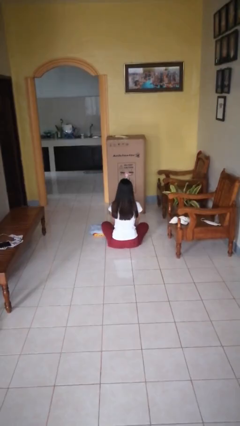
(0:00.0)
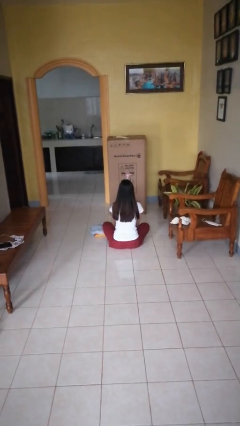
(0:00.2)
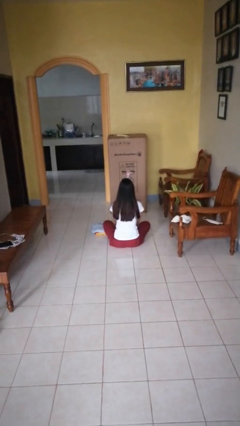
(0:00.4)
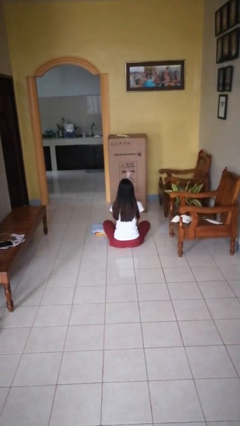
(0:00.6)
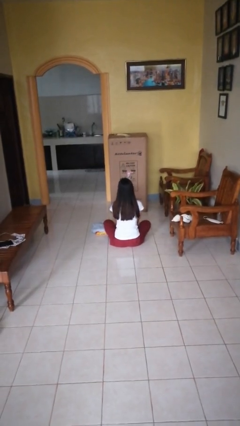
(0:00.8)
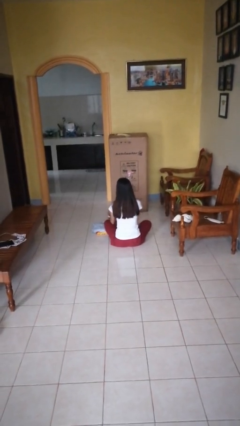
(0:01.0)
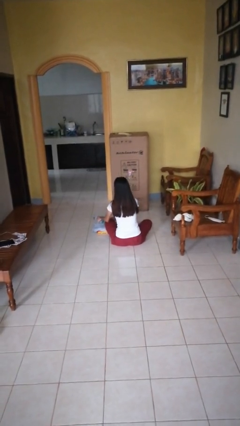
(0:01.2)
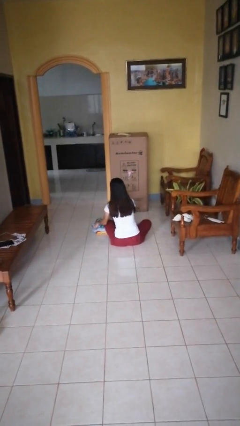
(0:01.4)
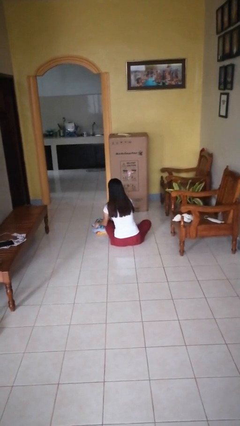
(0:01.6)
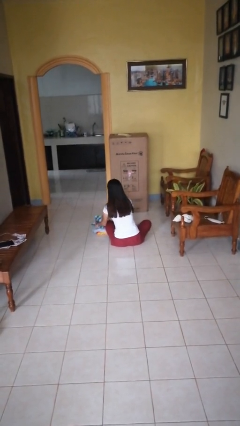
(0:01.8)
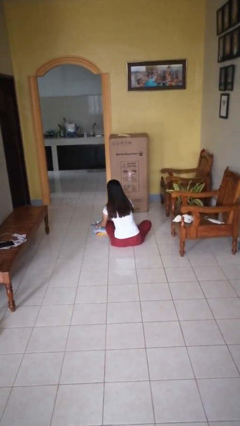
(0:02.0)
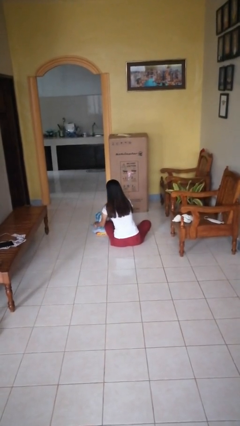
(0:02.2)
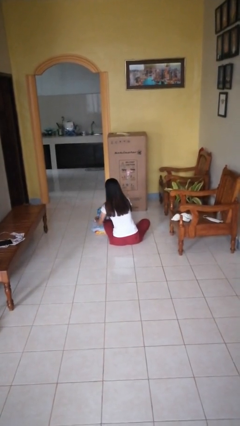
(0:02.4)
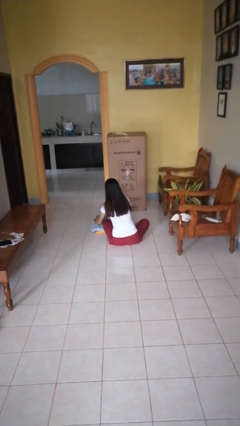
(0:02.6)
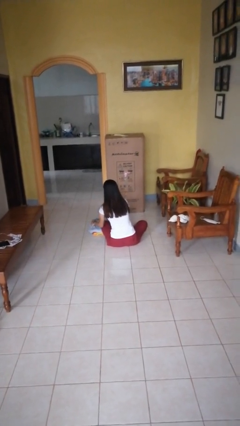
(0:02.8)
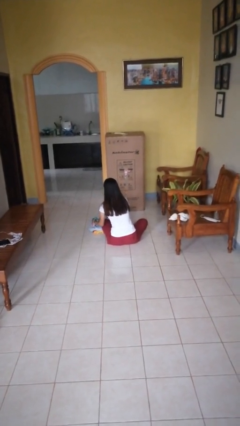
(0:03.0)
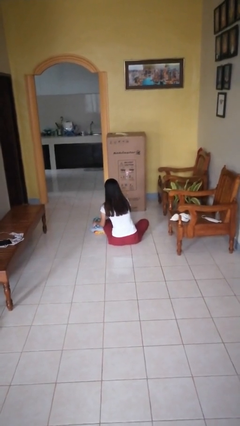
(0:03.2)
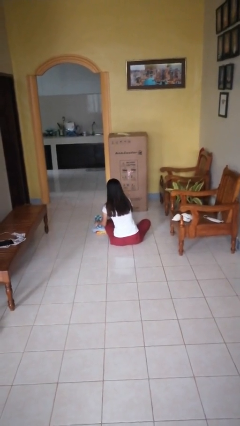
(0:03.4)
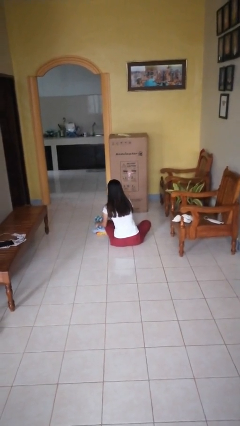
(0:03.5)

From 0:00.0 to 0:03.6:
person folds towel

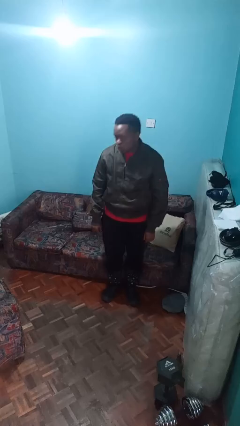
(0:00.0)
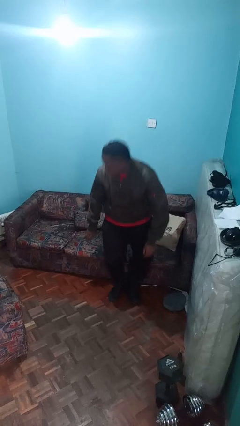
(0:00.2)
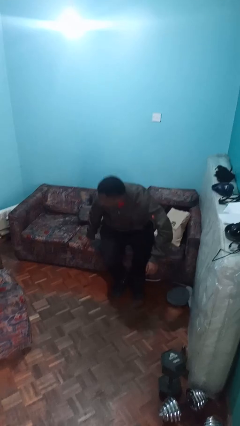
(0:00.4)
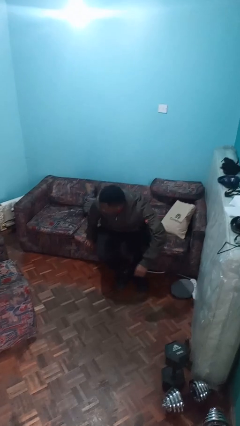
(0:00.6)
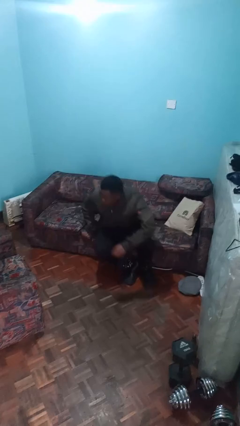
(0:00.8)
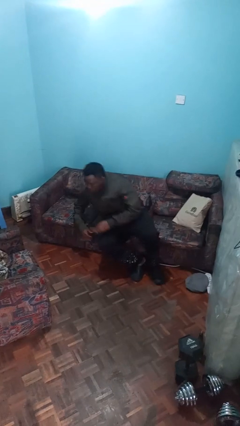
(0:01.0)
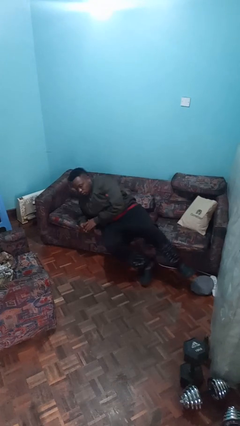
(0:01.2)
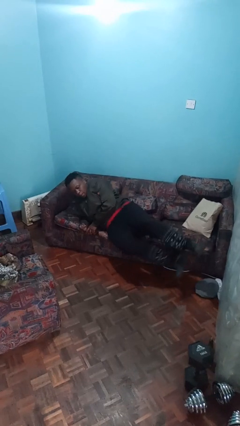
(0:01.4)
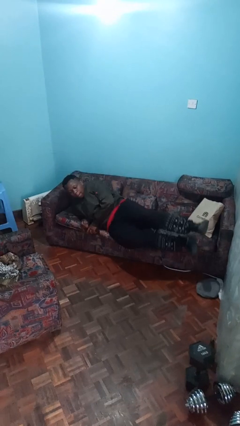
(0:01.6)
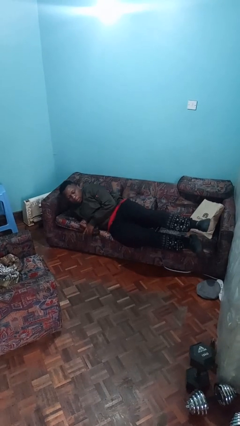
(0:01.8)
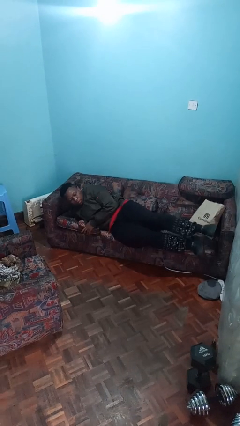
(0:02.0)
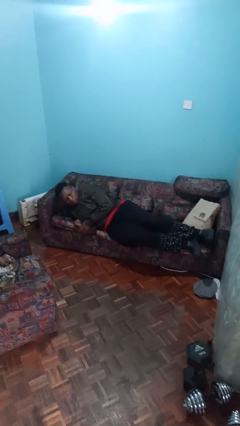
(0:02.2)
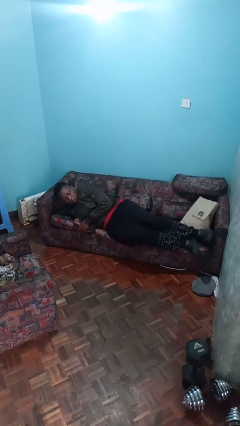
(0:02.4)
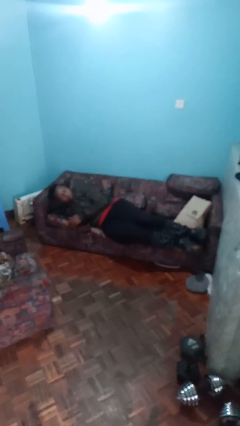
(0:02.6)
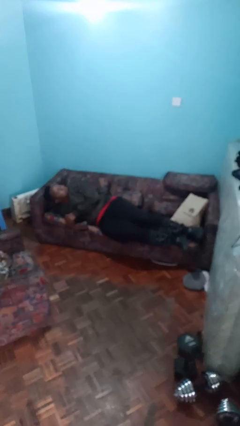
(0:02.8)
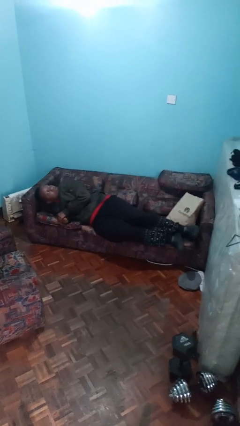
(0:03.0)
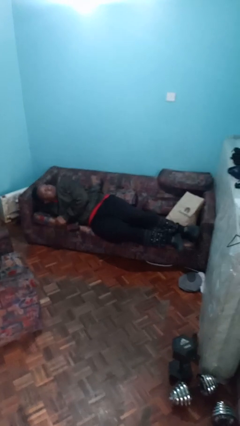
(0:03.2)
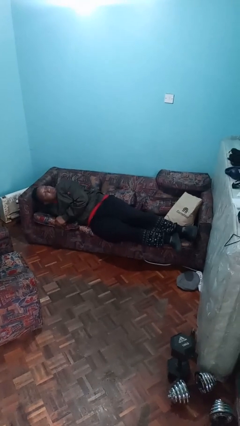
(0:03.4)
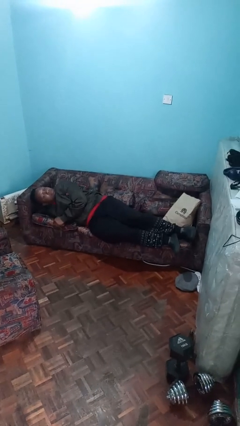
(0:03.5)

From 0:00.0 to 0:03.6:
person lies down on couch

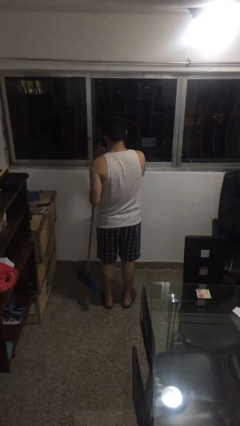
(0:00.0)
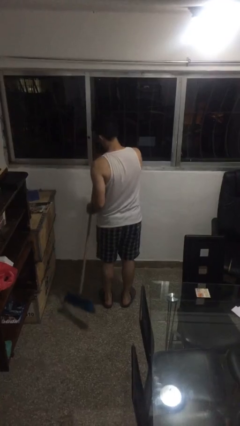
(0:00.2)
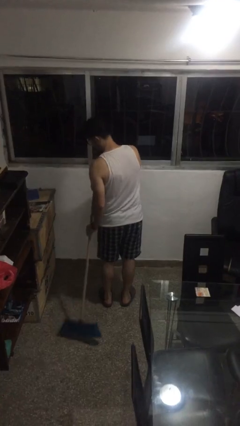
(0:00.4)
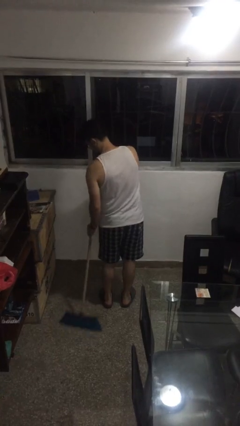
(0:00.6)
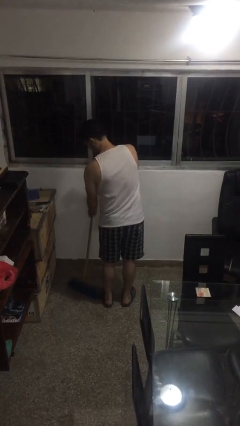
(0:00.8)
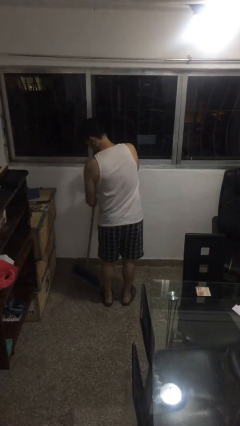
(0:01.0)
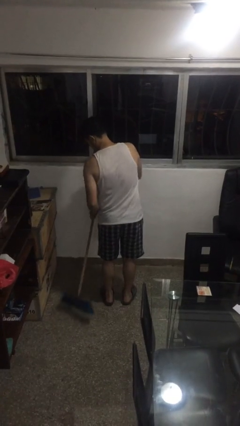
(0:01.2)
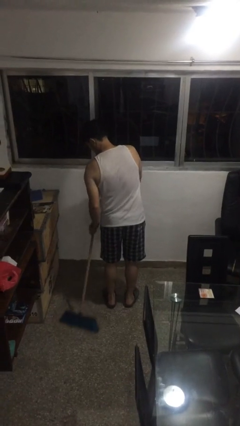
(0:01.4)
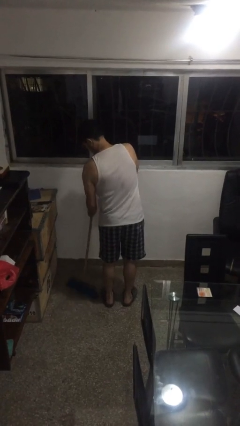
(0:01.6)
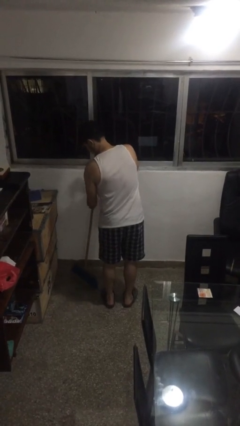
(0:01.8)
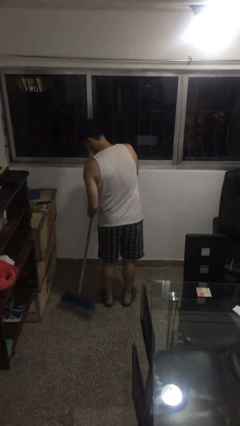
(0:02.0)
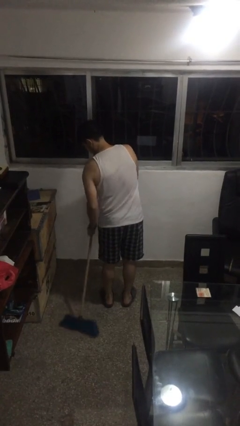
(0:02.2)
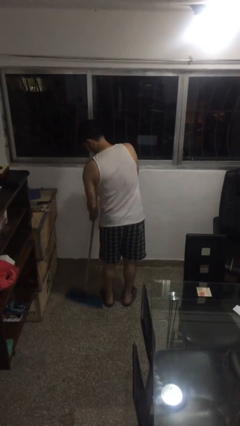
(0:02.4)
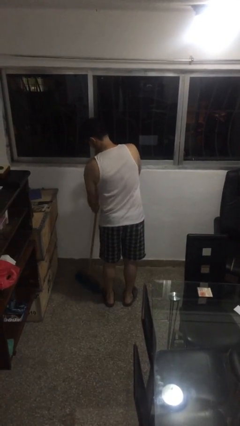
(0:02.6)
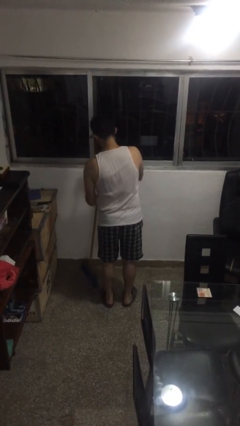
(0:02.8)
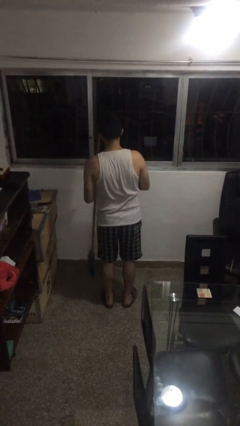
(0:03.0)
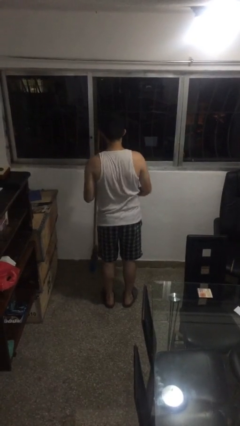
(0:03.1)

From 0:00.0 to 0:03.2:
person sweeps floor

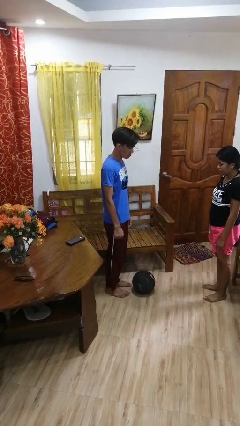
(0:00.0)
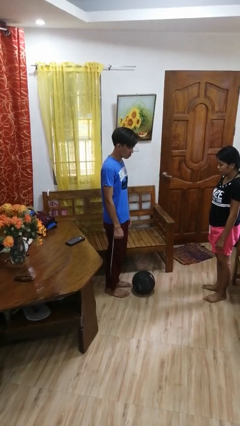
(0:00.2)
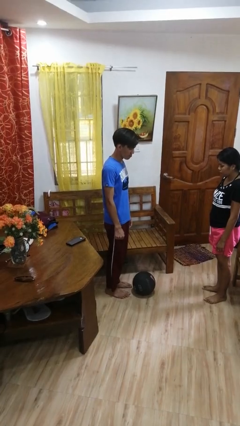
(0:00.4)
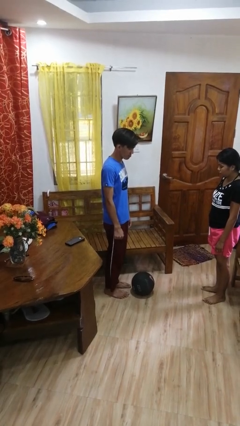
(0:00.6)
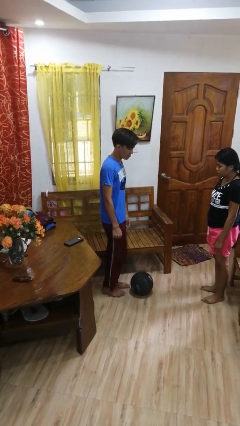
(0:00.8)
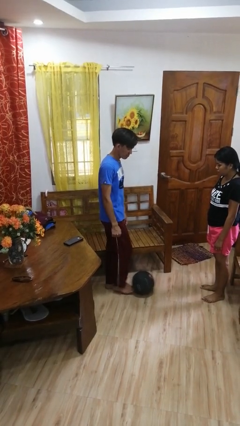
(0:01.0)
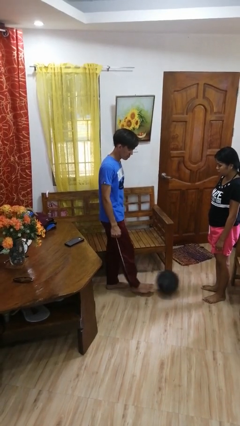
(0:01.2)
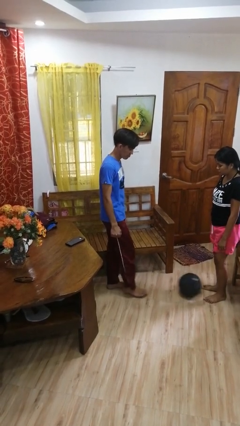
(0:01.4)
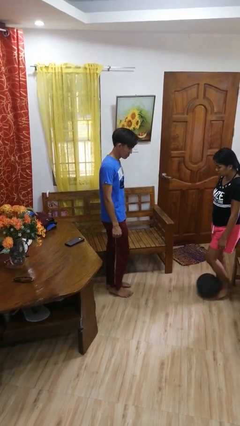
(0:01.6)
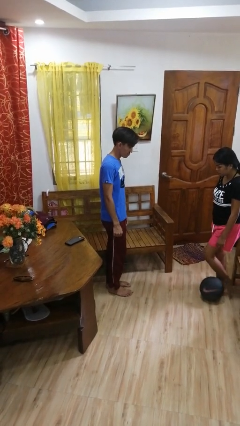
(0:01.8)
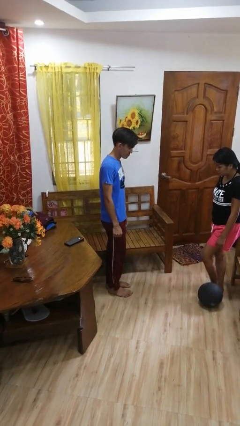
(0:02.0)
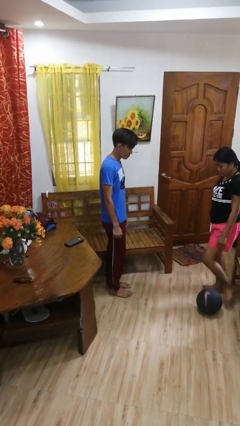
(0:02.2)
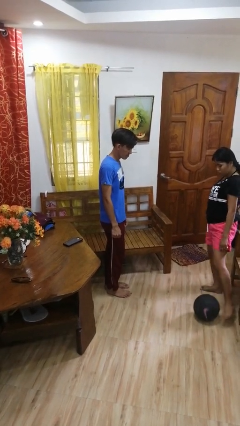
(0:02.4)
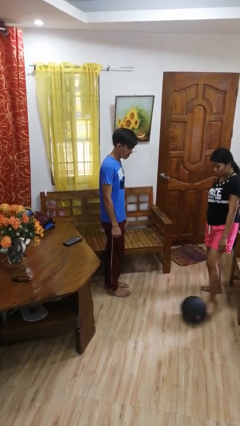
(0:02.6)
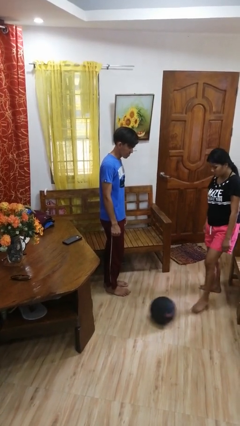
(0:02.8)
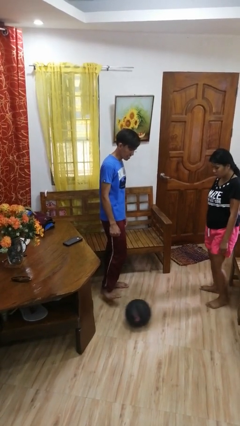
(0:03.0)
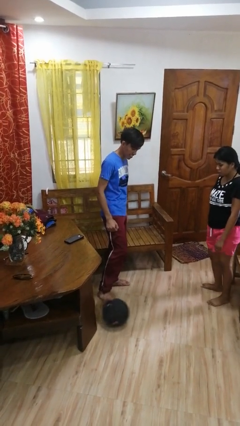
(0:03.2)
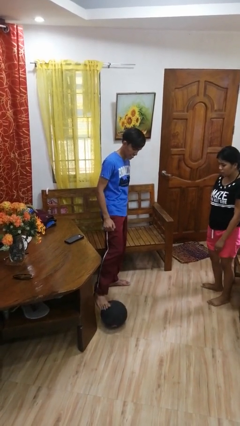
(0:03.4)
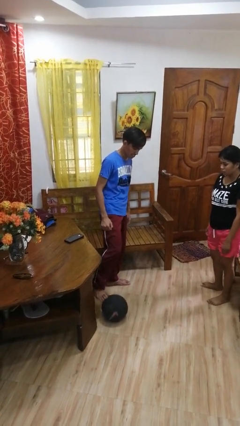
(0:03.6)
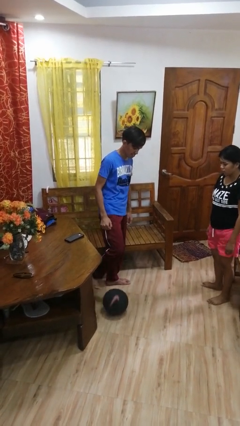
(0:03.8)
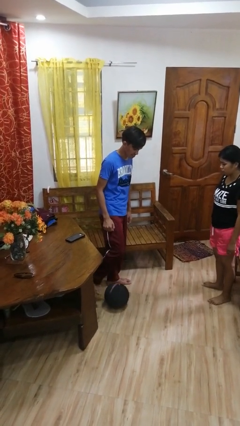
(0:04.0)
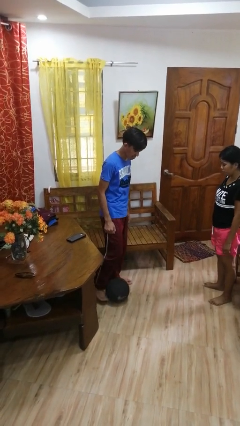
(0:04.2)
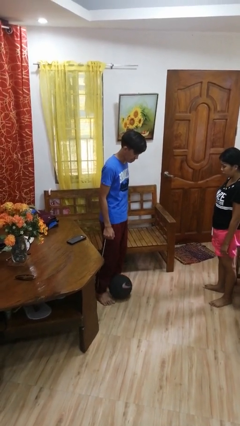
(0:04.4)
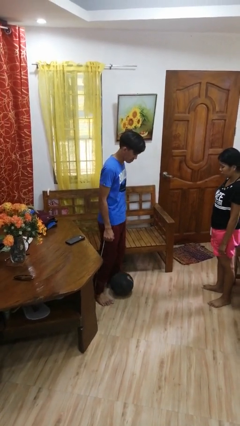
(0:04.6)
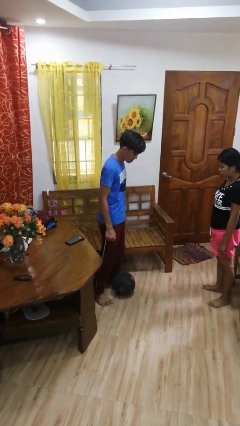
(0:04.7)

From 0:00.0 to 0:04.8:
person kicks object to person

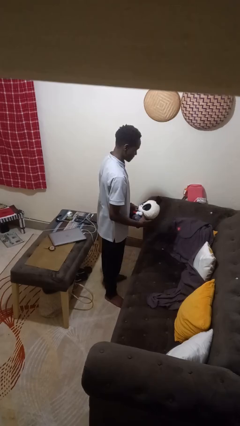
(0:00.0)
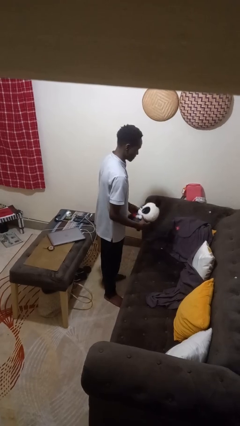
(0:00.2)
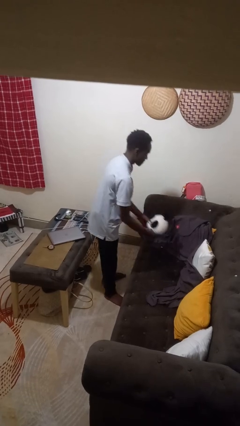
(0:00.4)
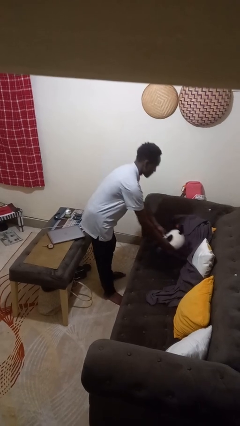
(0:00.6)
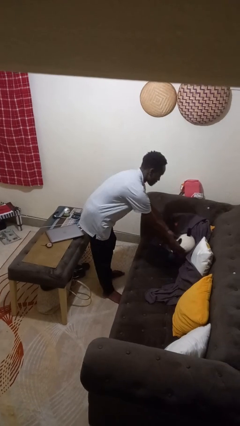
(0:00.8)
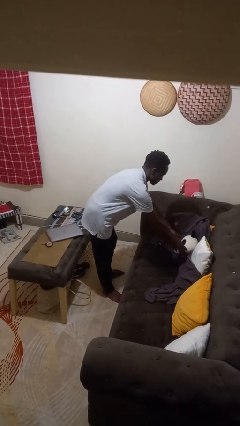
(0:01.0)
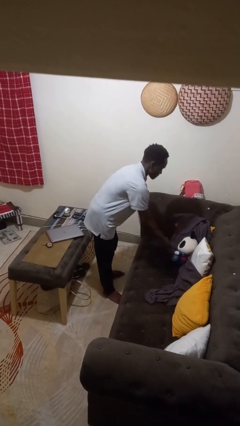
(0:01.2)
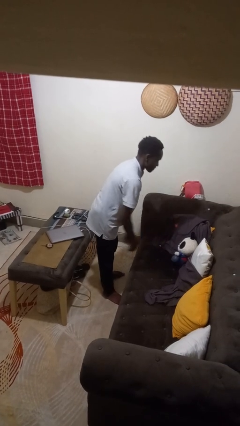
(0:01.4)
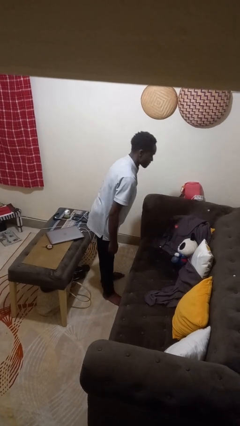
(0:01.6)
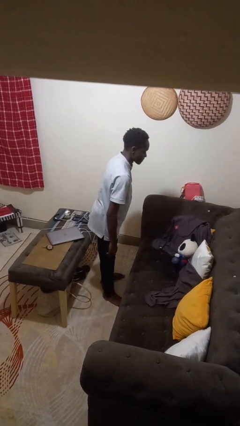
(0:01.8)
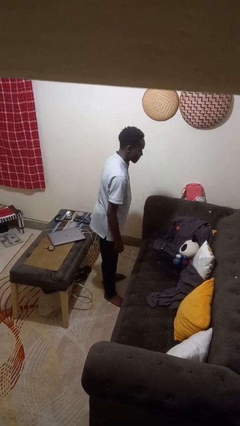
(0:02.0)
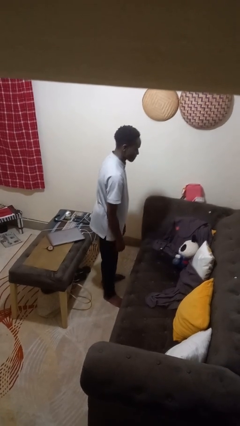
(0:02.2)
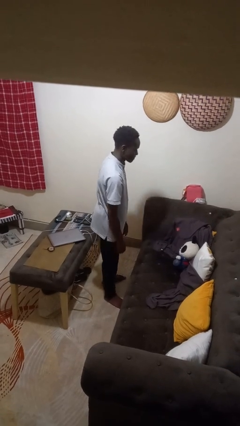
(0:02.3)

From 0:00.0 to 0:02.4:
person puts down object on couch

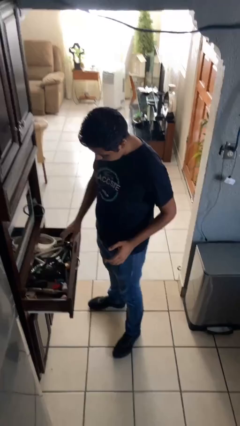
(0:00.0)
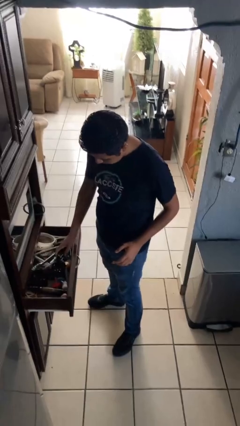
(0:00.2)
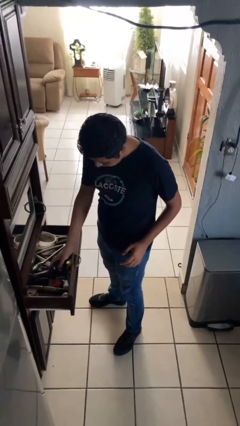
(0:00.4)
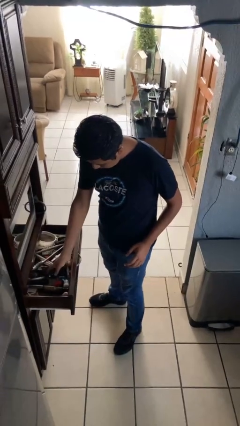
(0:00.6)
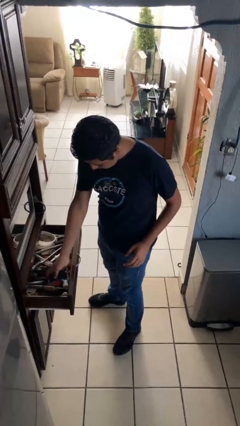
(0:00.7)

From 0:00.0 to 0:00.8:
person puts object into kitchen drawer
